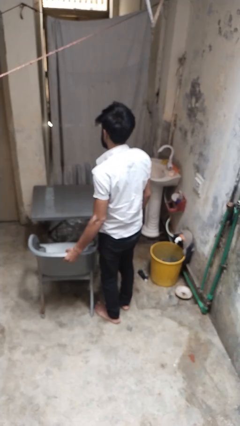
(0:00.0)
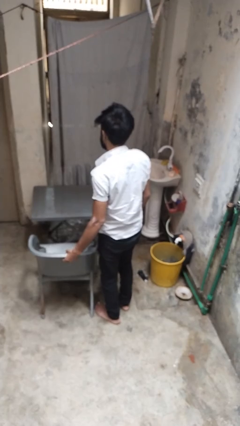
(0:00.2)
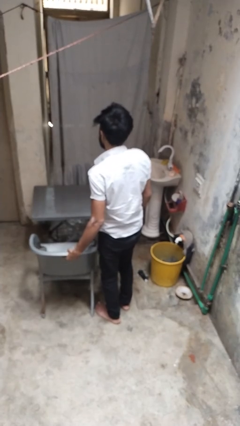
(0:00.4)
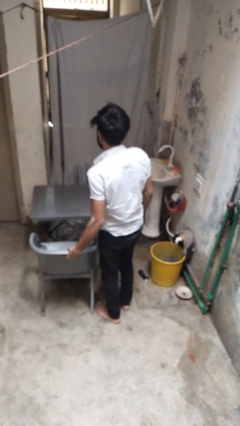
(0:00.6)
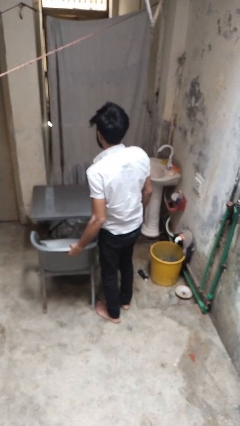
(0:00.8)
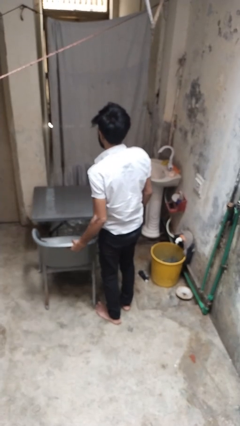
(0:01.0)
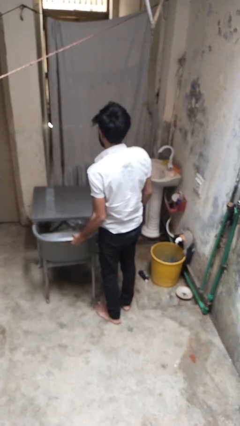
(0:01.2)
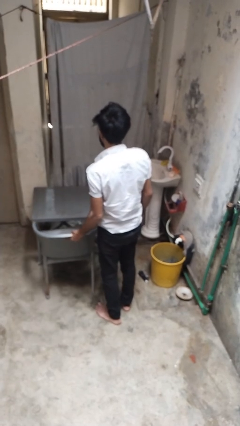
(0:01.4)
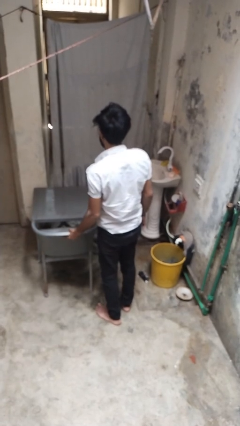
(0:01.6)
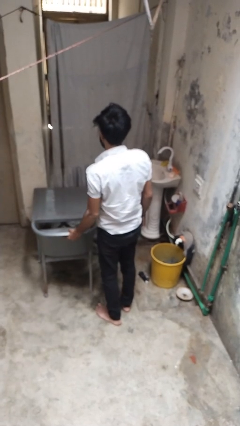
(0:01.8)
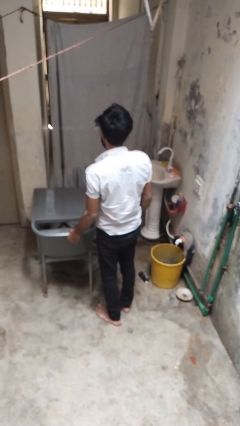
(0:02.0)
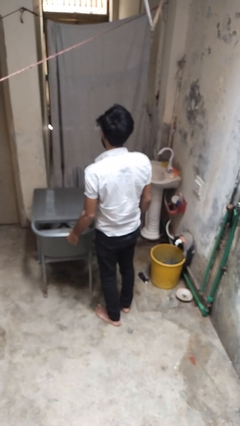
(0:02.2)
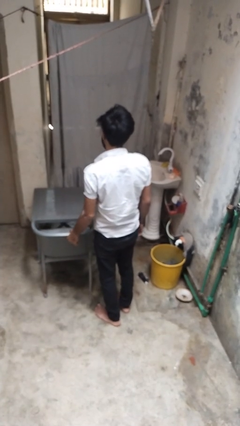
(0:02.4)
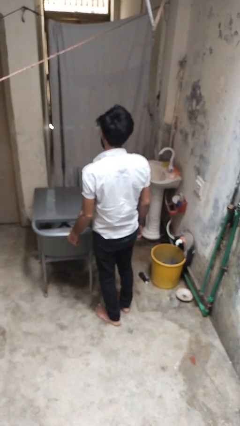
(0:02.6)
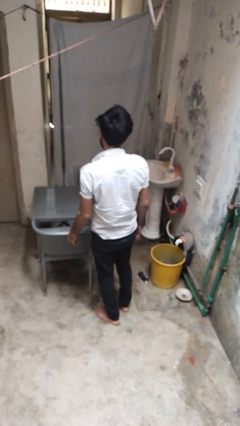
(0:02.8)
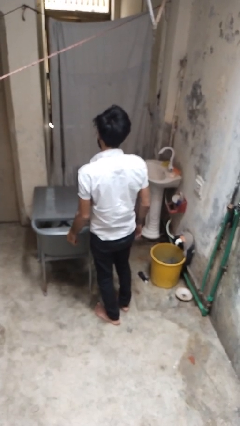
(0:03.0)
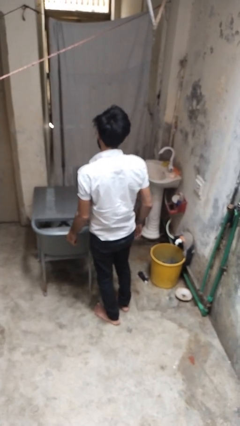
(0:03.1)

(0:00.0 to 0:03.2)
person pushes in chair

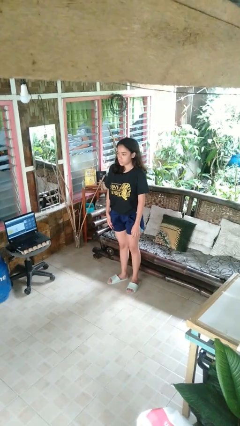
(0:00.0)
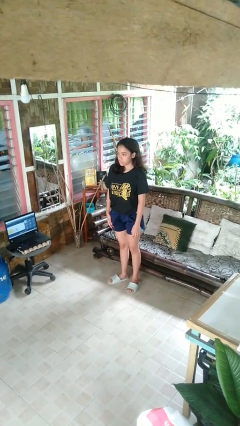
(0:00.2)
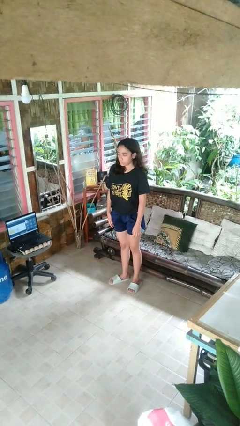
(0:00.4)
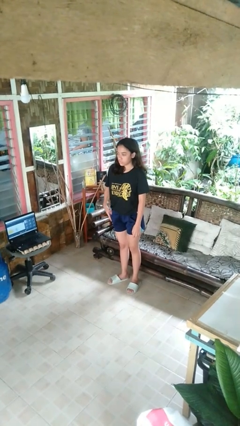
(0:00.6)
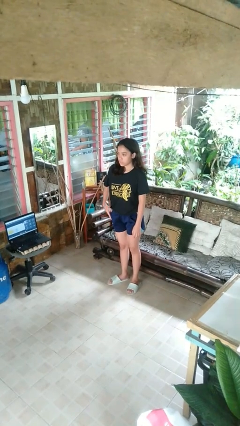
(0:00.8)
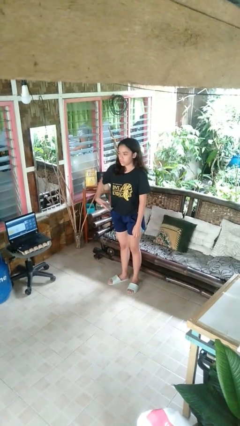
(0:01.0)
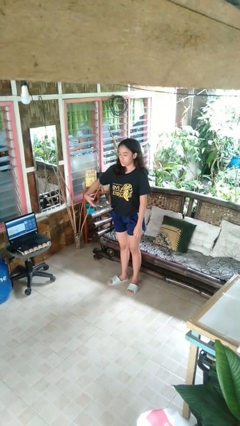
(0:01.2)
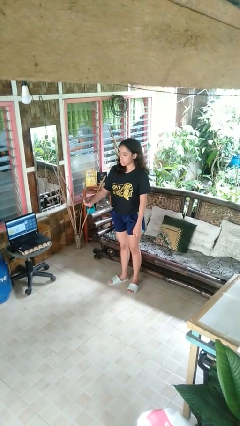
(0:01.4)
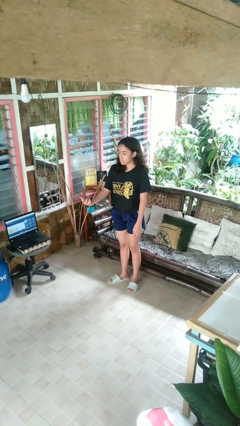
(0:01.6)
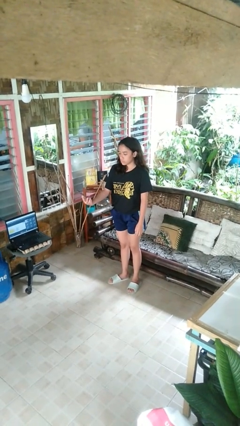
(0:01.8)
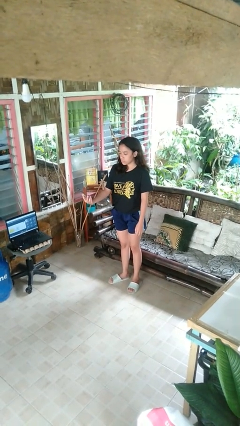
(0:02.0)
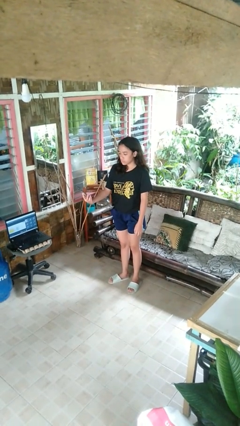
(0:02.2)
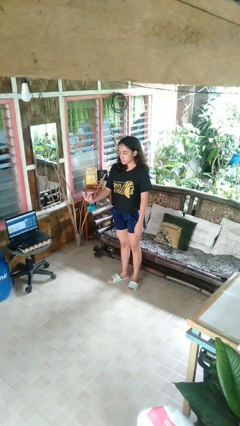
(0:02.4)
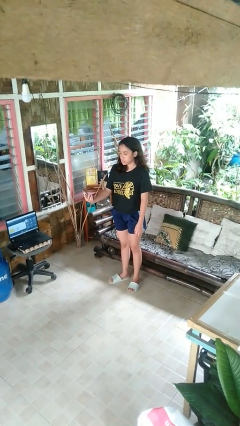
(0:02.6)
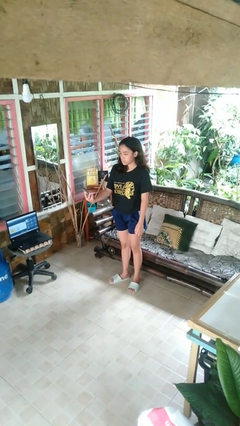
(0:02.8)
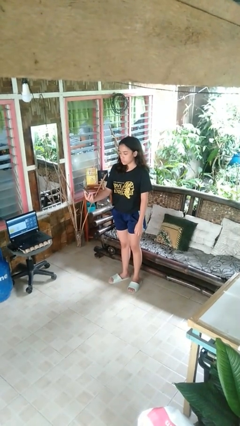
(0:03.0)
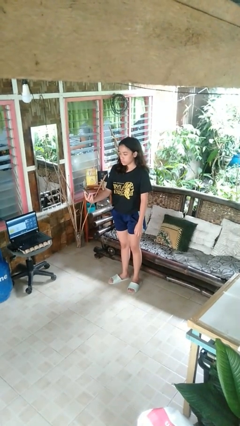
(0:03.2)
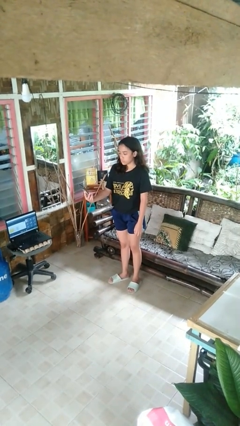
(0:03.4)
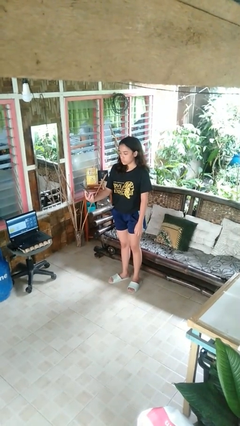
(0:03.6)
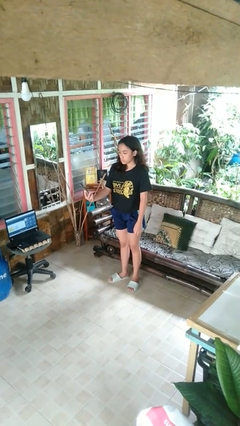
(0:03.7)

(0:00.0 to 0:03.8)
person takes phone from pocket

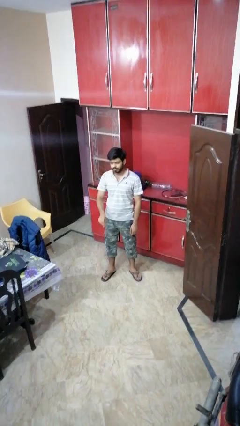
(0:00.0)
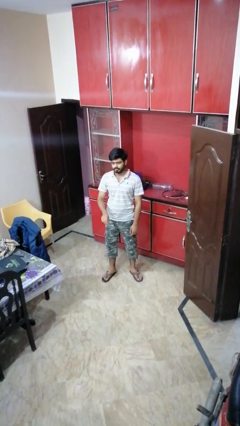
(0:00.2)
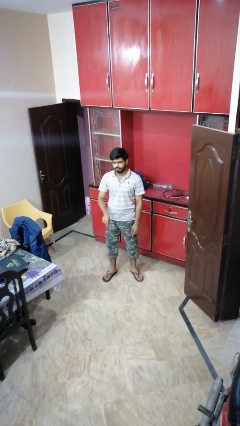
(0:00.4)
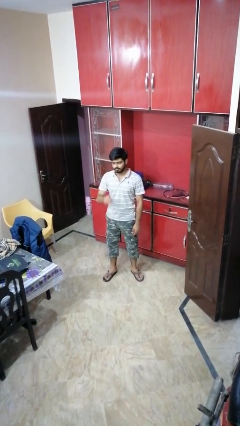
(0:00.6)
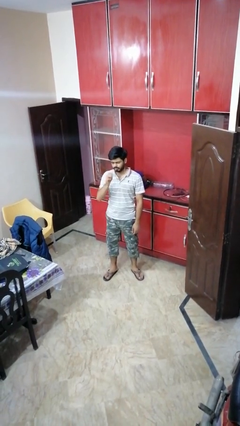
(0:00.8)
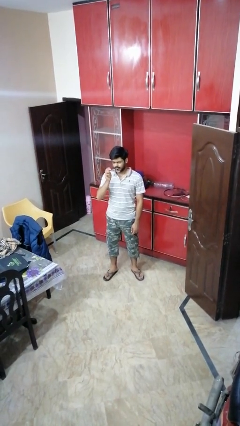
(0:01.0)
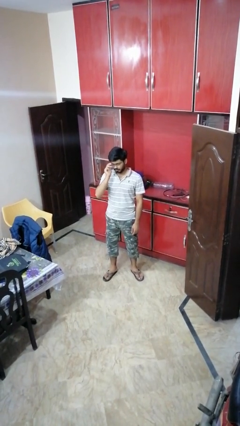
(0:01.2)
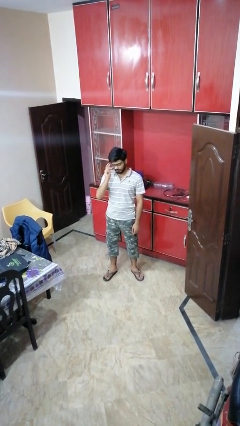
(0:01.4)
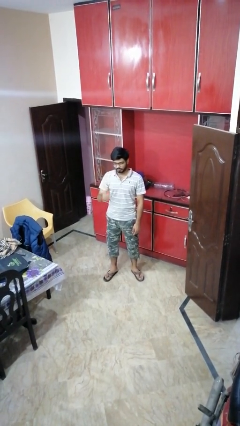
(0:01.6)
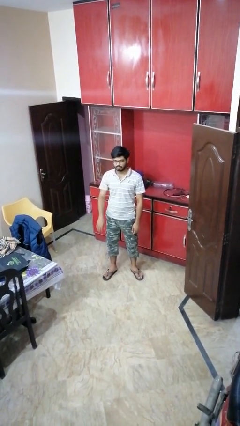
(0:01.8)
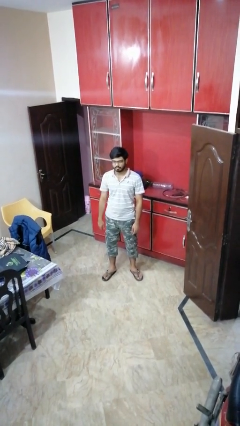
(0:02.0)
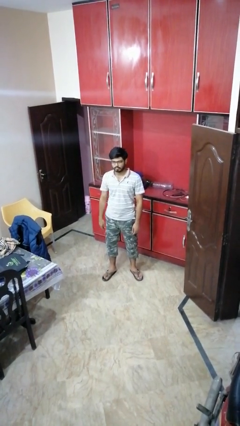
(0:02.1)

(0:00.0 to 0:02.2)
person puts on glasses

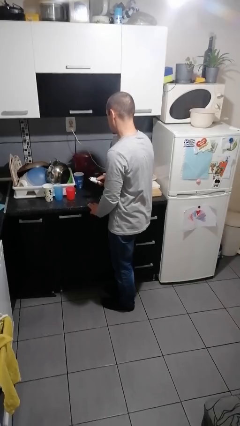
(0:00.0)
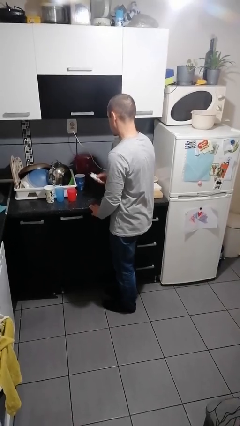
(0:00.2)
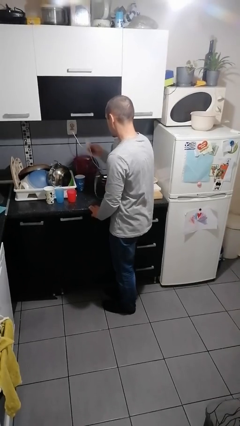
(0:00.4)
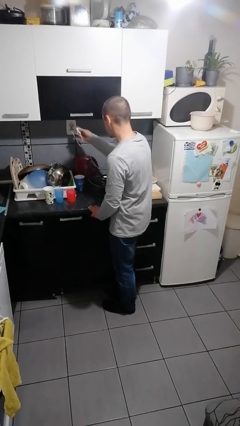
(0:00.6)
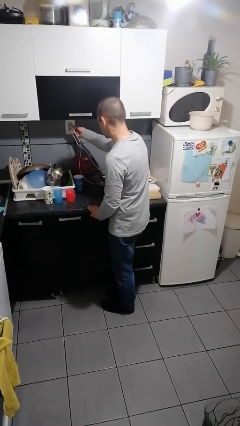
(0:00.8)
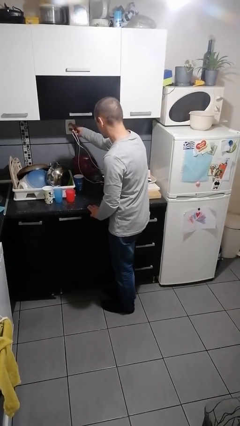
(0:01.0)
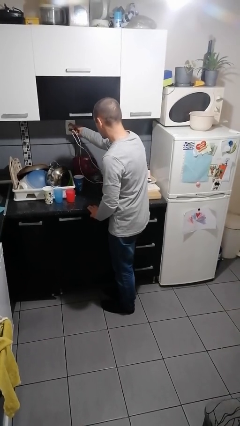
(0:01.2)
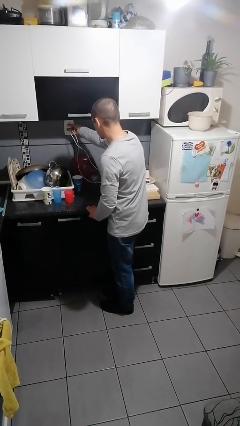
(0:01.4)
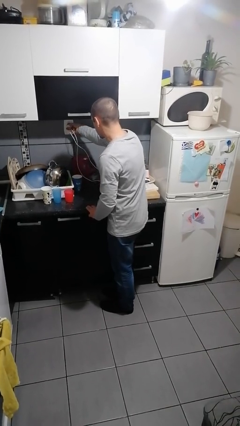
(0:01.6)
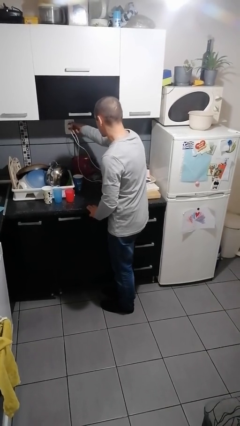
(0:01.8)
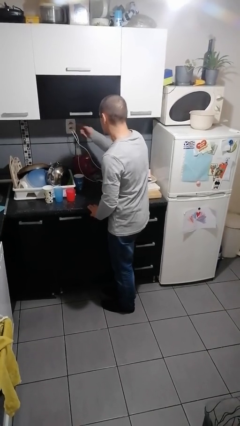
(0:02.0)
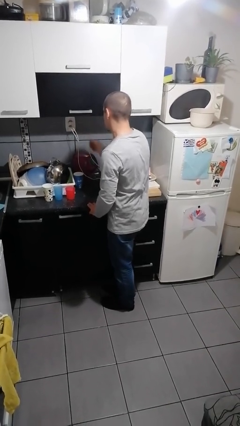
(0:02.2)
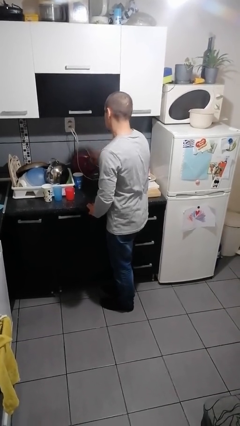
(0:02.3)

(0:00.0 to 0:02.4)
person plugs into electrical socket

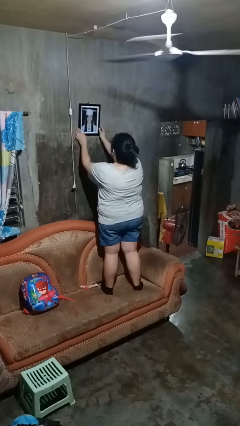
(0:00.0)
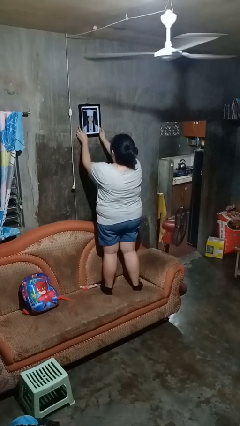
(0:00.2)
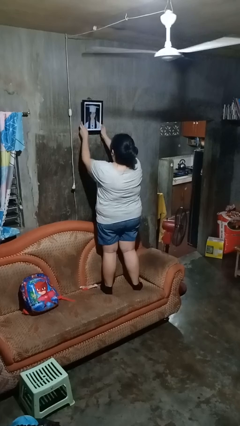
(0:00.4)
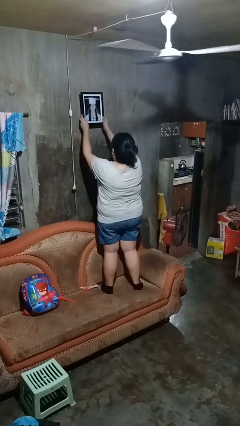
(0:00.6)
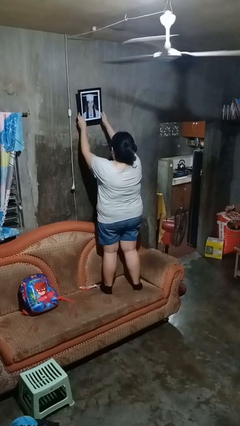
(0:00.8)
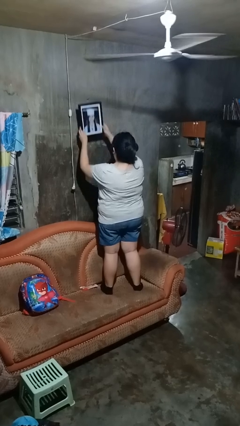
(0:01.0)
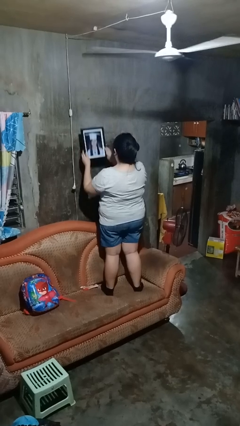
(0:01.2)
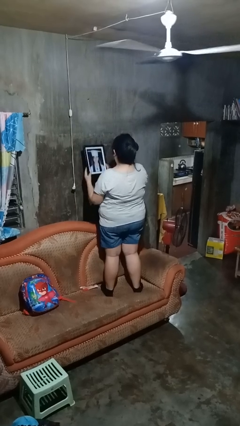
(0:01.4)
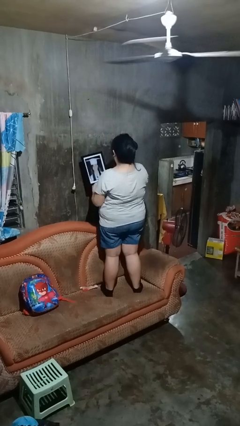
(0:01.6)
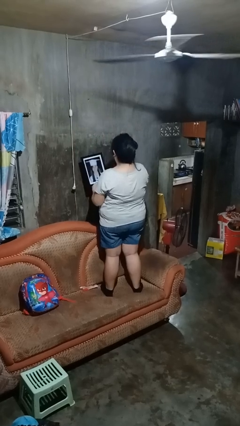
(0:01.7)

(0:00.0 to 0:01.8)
person takes down picture frame

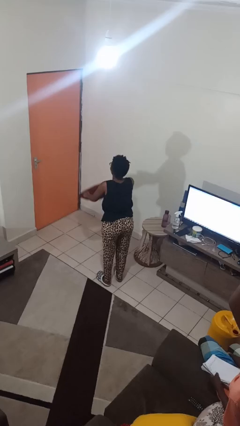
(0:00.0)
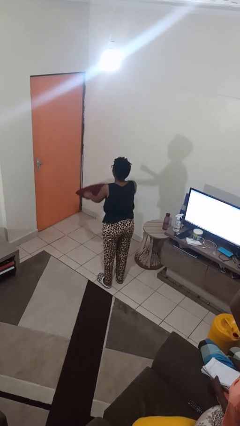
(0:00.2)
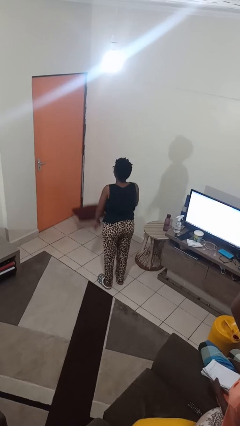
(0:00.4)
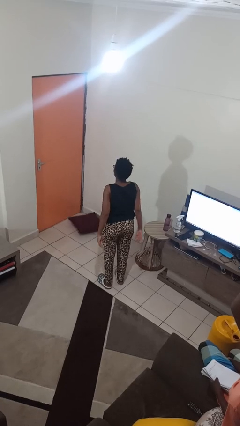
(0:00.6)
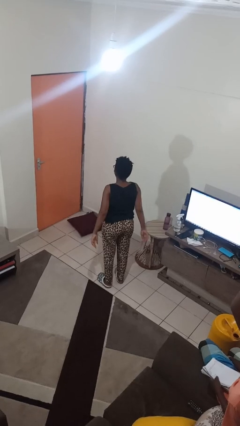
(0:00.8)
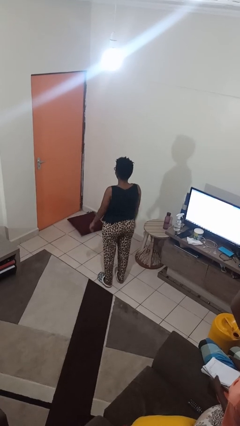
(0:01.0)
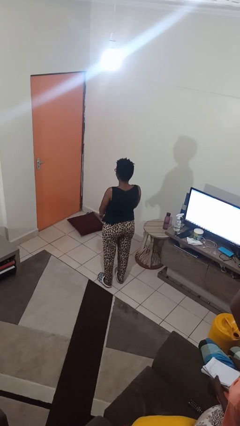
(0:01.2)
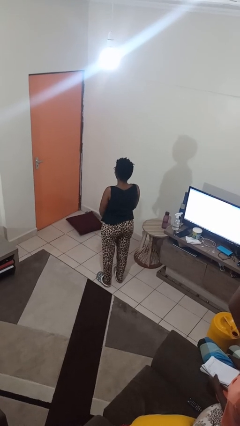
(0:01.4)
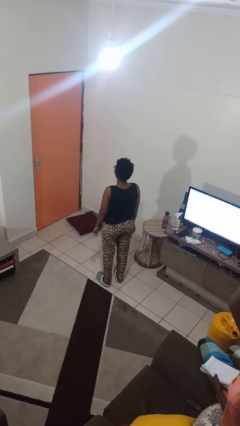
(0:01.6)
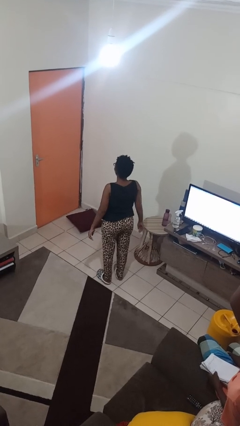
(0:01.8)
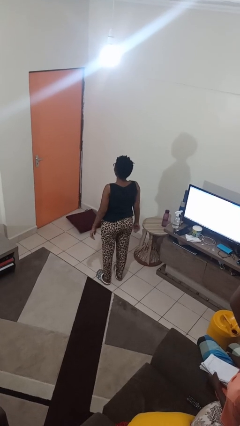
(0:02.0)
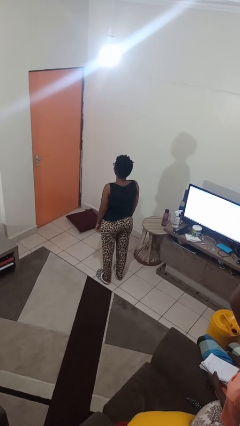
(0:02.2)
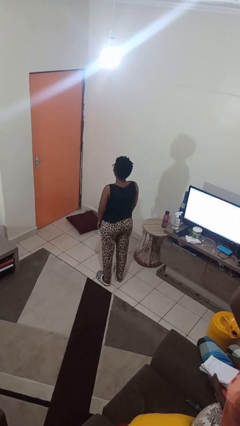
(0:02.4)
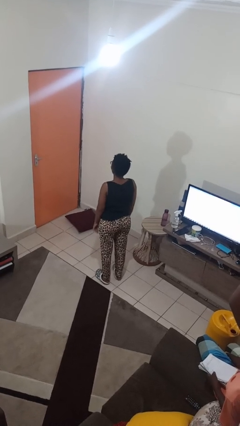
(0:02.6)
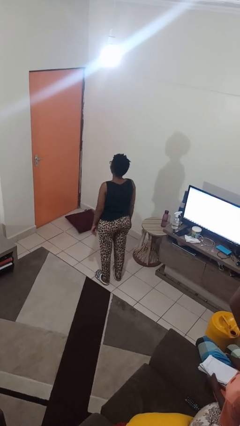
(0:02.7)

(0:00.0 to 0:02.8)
person throws object to ground

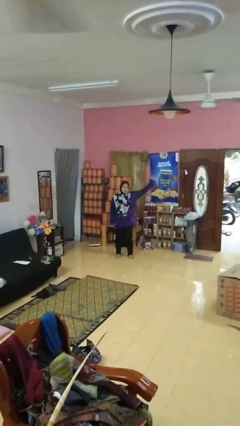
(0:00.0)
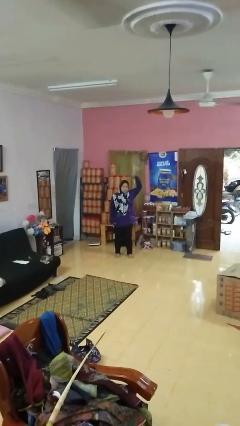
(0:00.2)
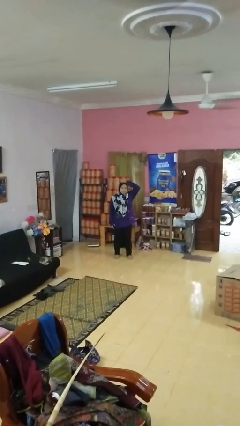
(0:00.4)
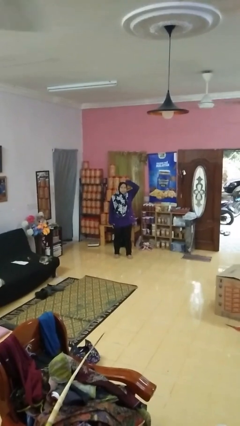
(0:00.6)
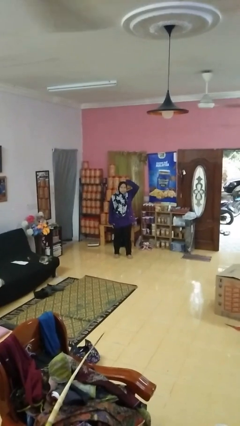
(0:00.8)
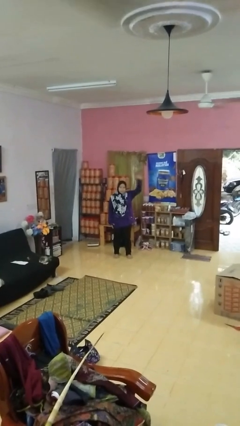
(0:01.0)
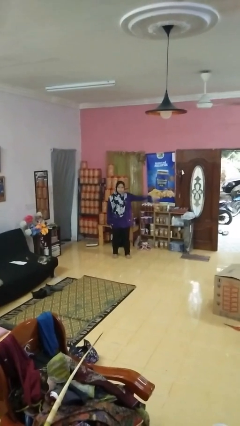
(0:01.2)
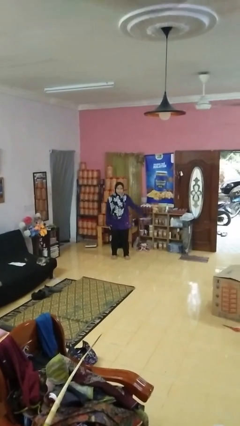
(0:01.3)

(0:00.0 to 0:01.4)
person pats head
